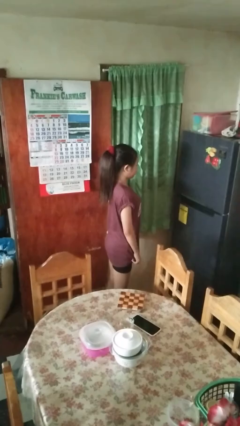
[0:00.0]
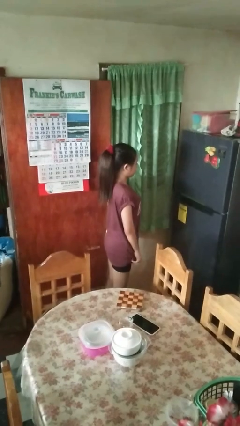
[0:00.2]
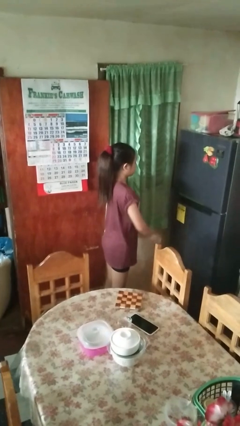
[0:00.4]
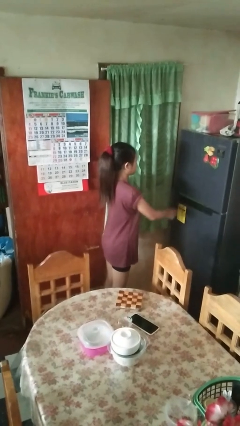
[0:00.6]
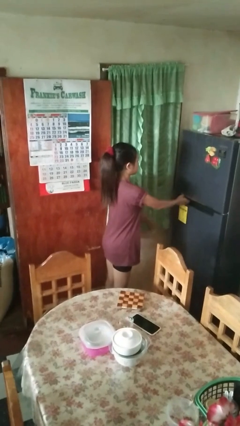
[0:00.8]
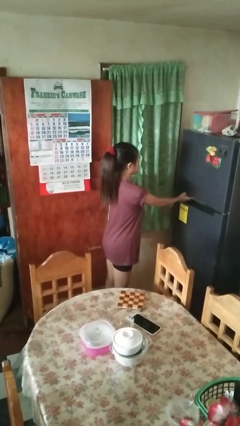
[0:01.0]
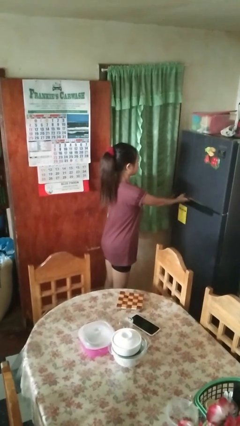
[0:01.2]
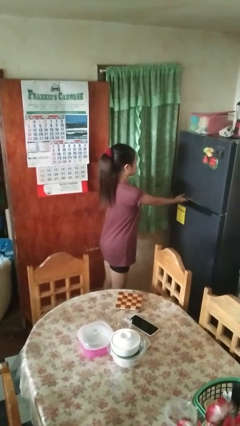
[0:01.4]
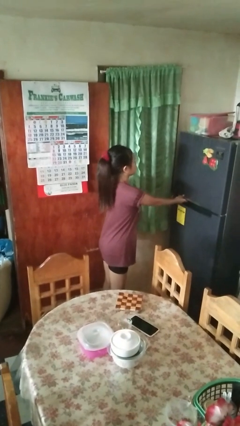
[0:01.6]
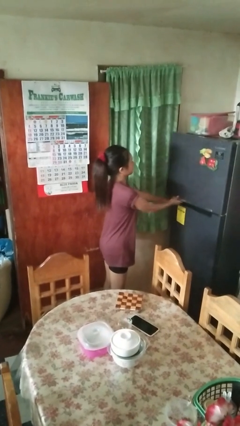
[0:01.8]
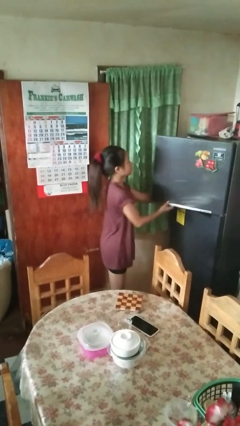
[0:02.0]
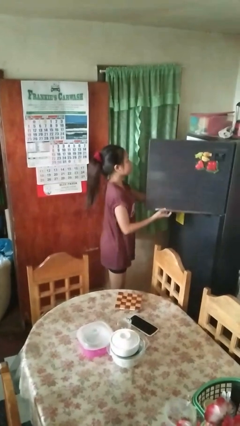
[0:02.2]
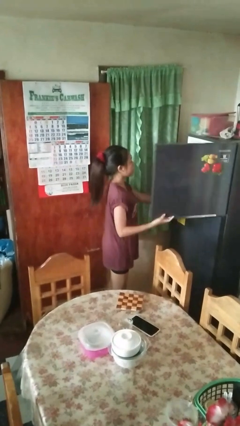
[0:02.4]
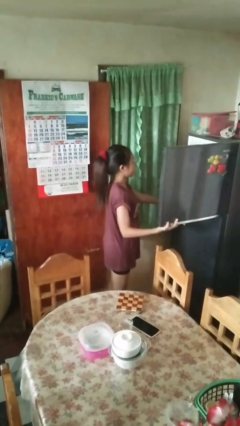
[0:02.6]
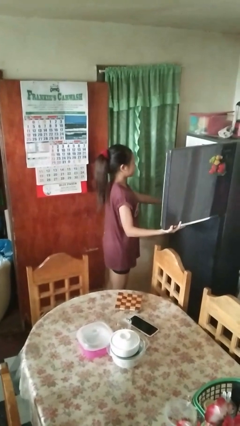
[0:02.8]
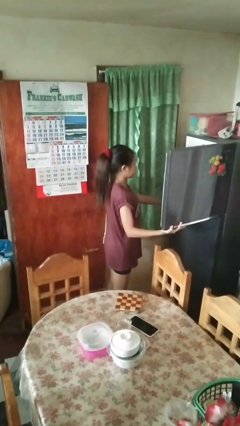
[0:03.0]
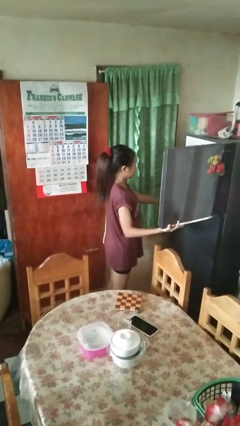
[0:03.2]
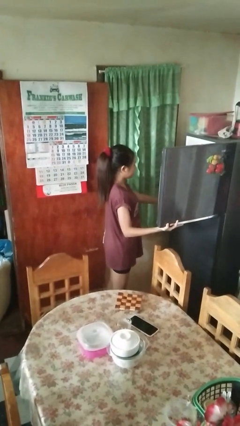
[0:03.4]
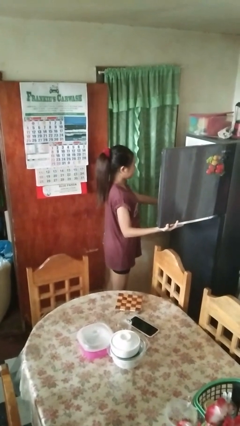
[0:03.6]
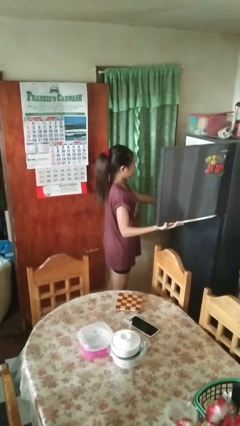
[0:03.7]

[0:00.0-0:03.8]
person opens refrigerator

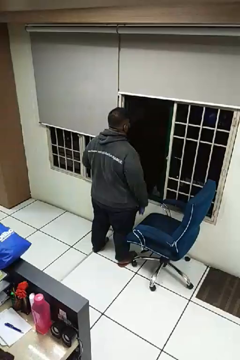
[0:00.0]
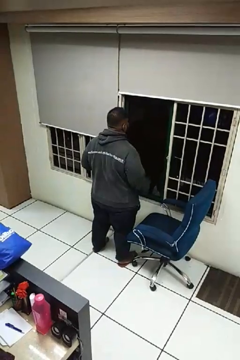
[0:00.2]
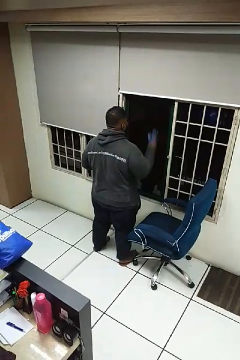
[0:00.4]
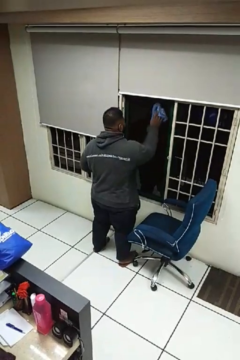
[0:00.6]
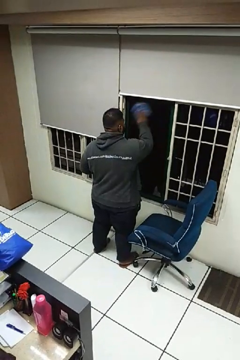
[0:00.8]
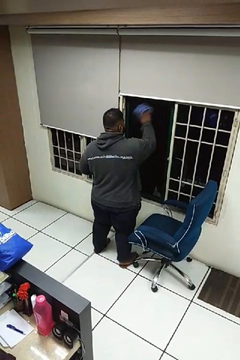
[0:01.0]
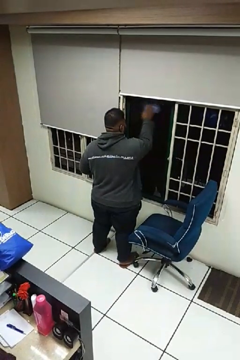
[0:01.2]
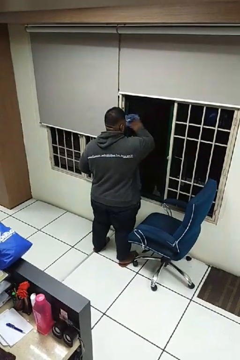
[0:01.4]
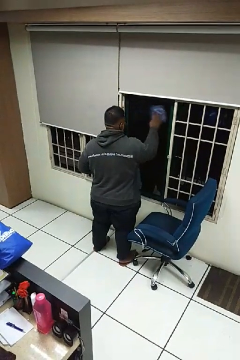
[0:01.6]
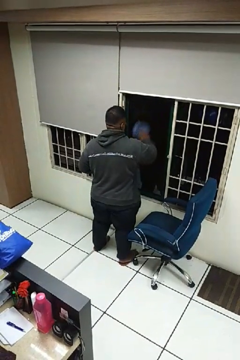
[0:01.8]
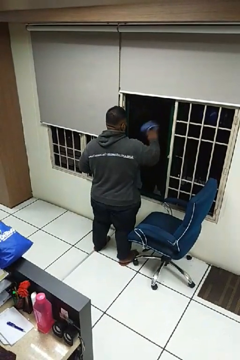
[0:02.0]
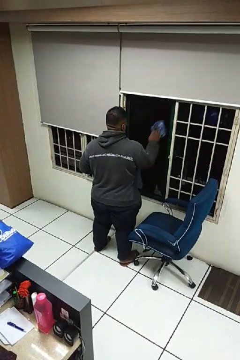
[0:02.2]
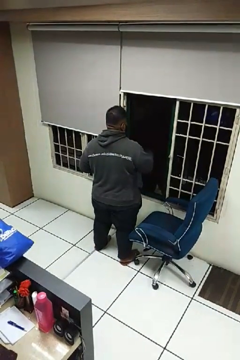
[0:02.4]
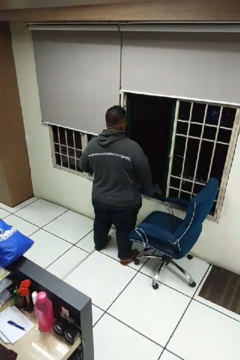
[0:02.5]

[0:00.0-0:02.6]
person washes window

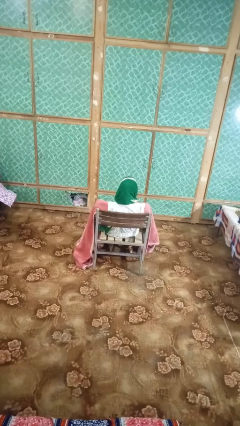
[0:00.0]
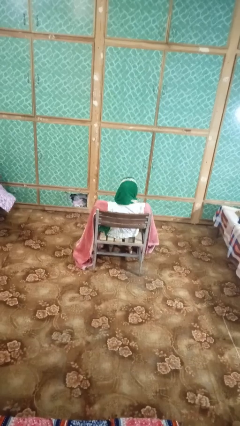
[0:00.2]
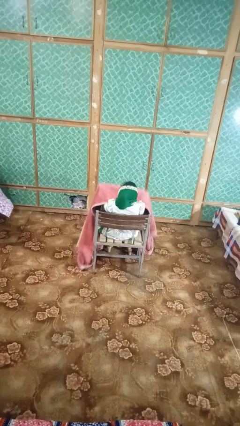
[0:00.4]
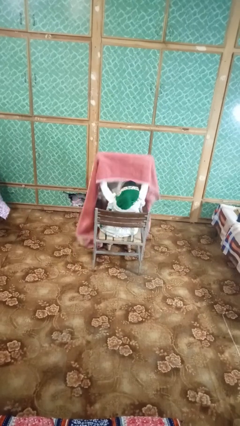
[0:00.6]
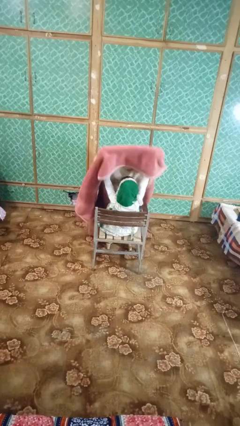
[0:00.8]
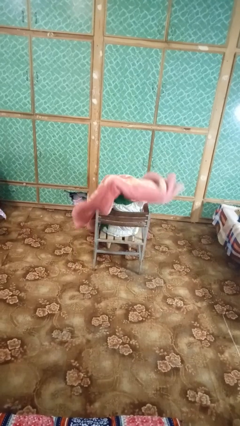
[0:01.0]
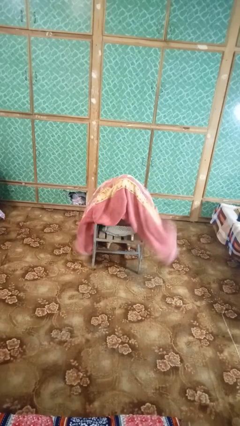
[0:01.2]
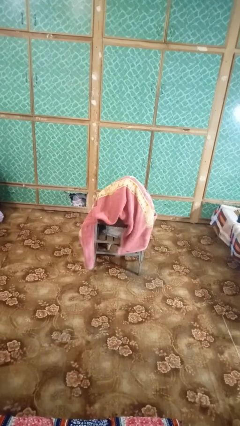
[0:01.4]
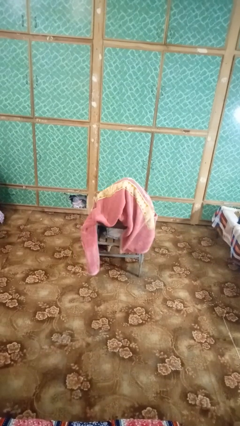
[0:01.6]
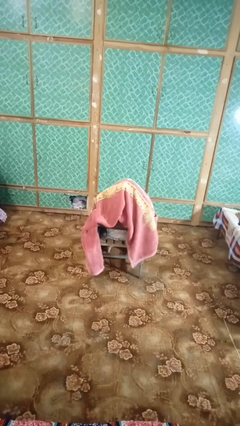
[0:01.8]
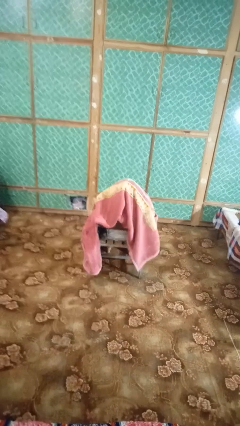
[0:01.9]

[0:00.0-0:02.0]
person covers with blanket

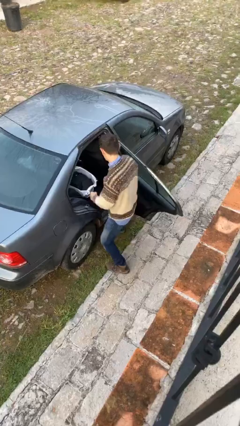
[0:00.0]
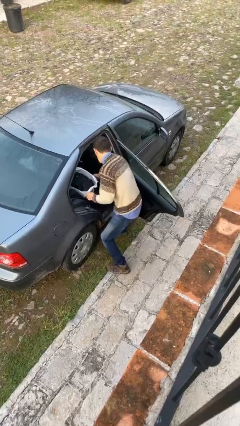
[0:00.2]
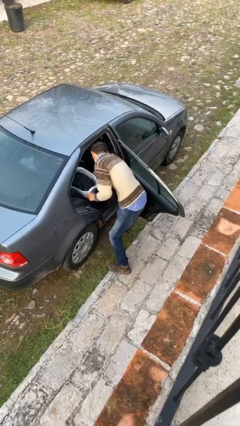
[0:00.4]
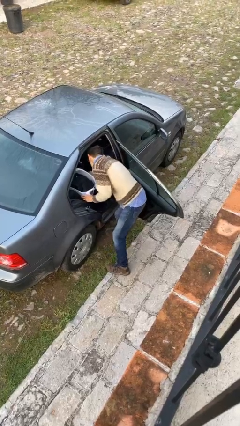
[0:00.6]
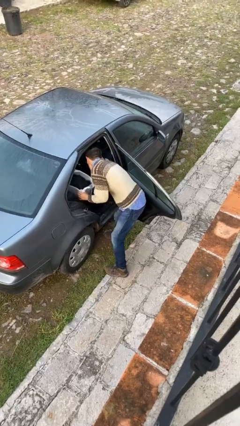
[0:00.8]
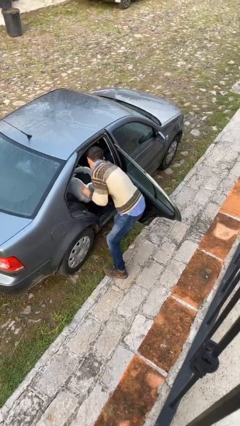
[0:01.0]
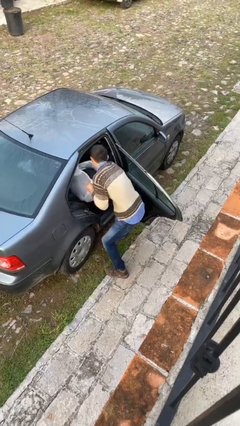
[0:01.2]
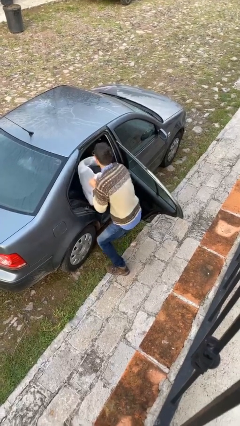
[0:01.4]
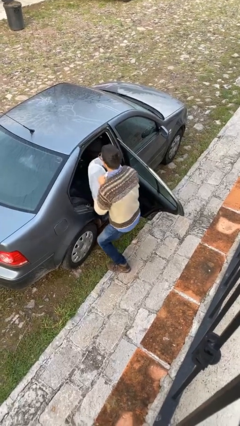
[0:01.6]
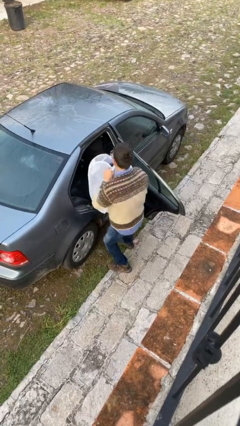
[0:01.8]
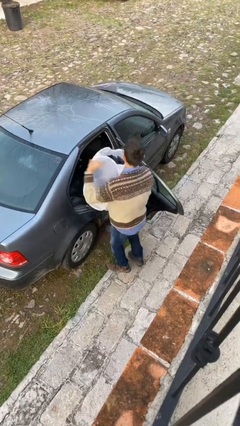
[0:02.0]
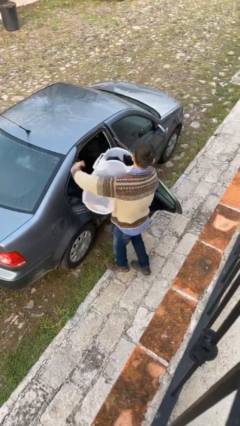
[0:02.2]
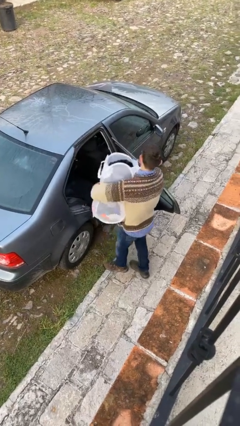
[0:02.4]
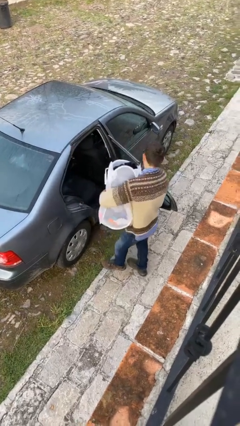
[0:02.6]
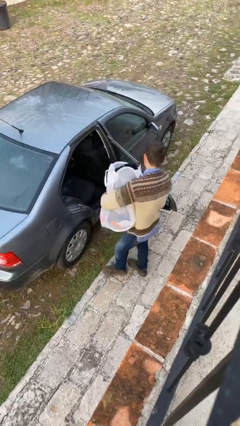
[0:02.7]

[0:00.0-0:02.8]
person unloads car

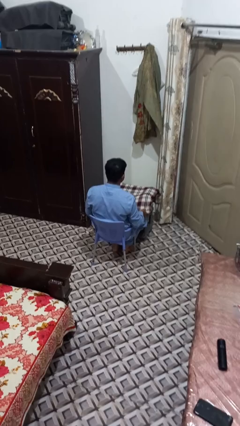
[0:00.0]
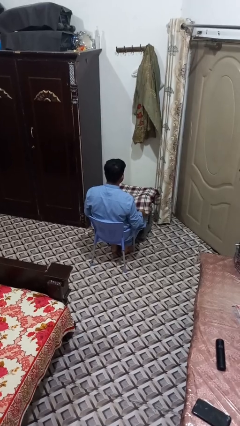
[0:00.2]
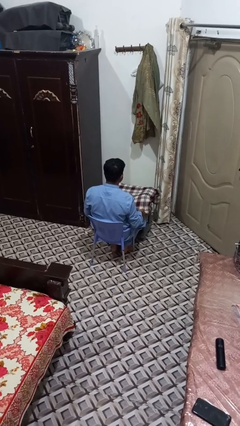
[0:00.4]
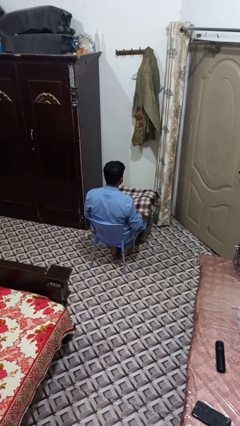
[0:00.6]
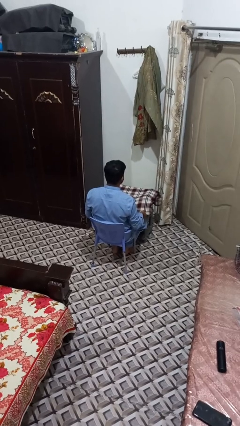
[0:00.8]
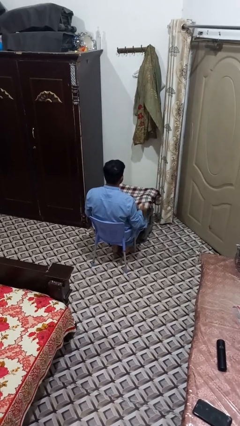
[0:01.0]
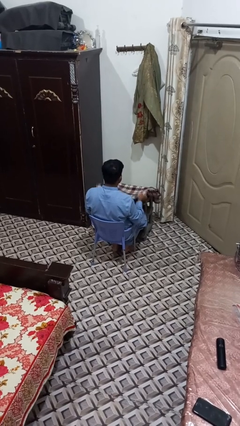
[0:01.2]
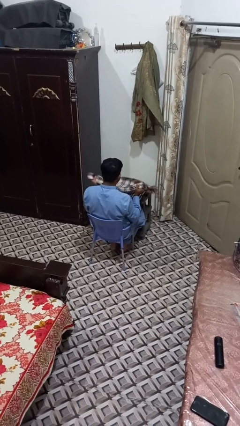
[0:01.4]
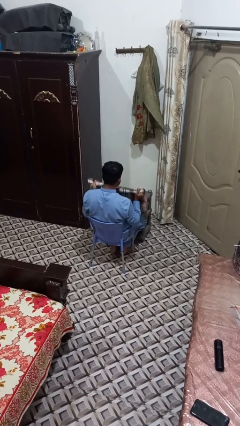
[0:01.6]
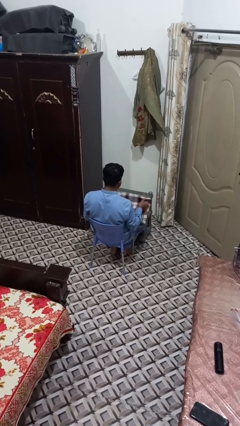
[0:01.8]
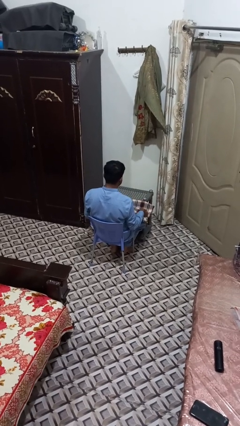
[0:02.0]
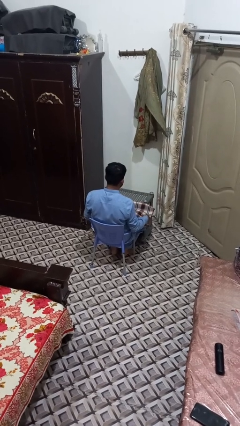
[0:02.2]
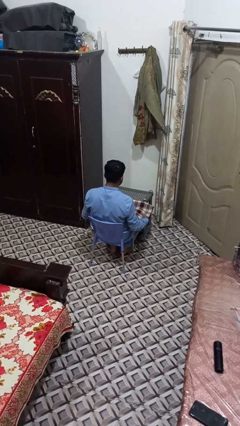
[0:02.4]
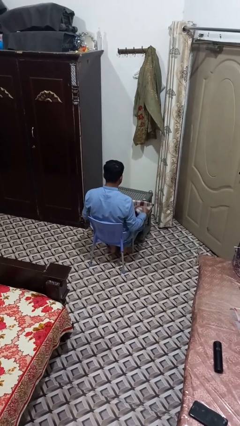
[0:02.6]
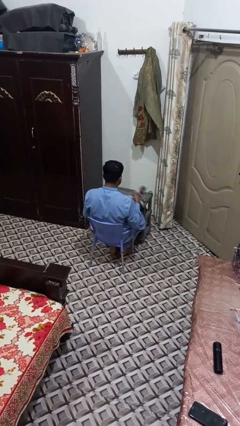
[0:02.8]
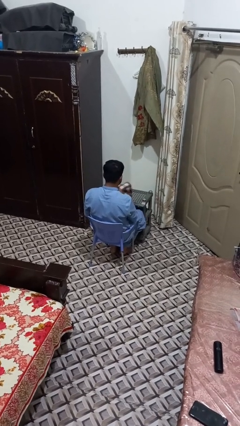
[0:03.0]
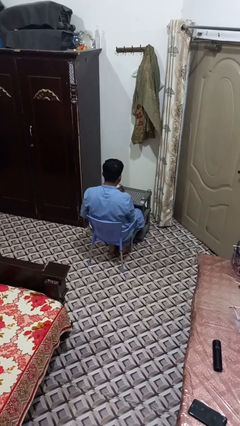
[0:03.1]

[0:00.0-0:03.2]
person folds tablecloth

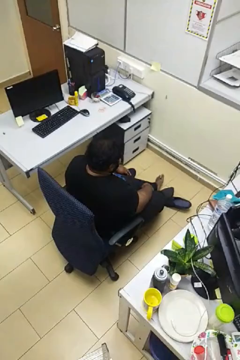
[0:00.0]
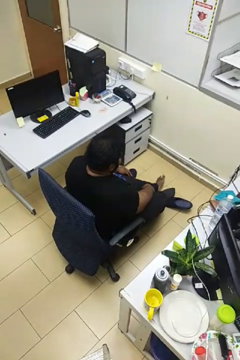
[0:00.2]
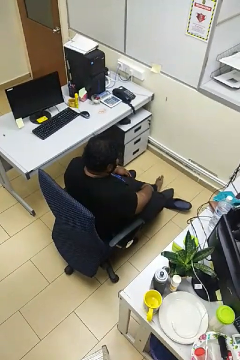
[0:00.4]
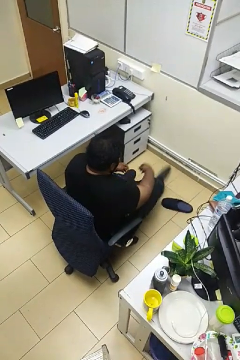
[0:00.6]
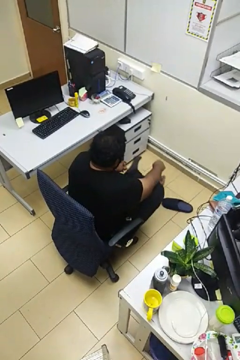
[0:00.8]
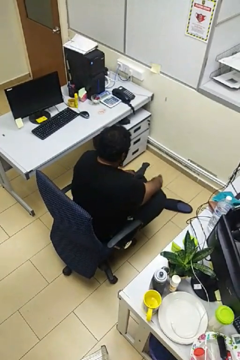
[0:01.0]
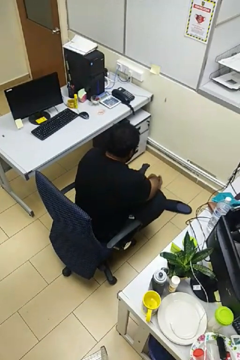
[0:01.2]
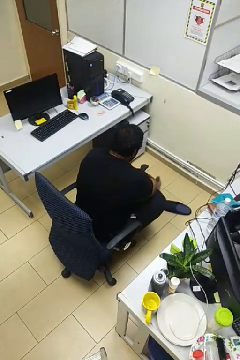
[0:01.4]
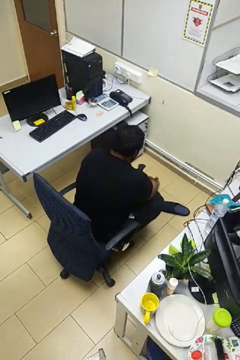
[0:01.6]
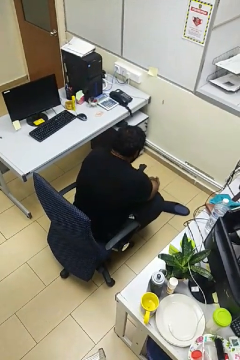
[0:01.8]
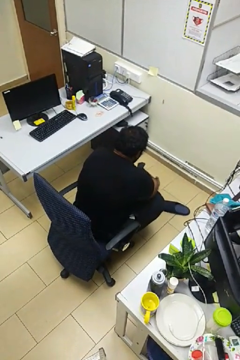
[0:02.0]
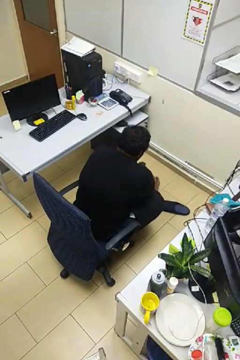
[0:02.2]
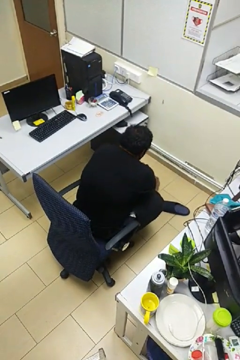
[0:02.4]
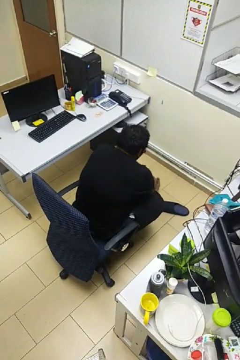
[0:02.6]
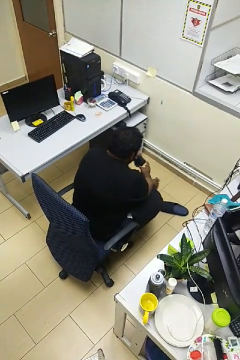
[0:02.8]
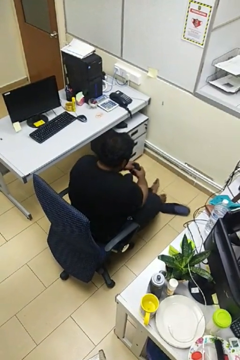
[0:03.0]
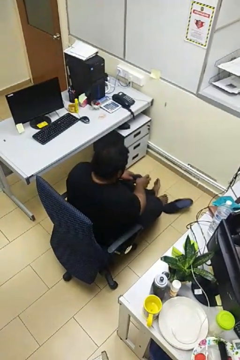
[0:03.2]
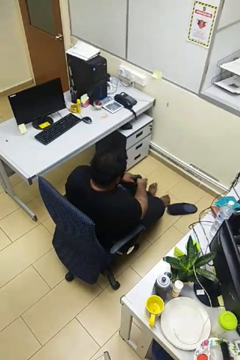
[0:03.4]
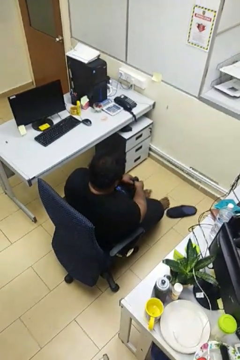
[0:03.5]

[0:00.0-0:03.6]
person takes off socks

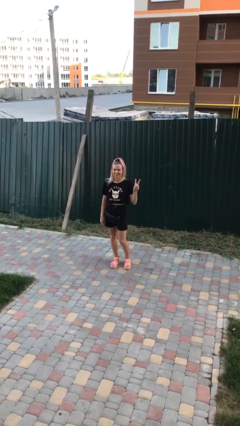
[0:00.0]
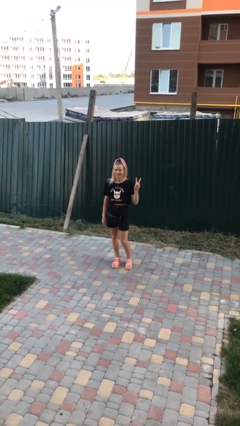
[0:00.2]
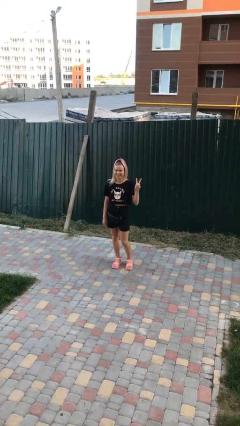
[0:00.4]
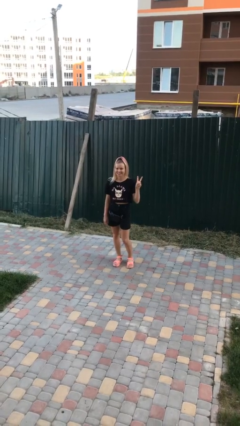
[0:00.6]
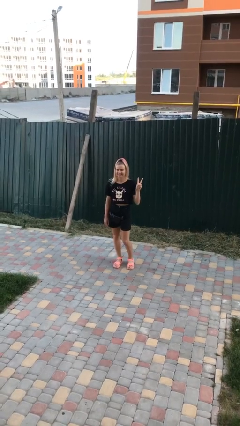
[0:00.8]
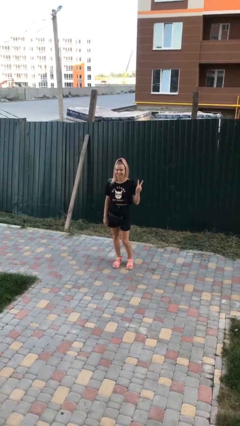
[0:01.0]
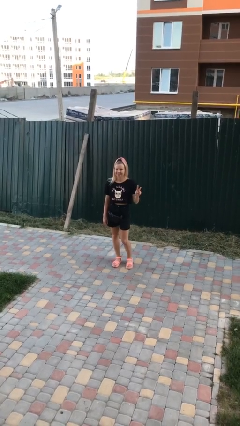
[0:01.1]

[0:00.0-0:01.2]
person gestures peace
